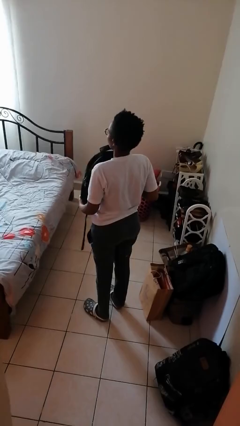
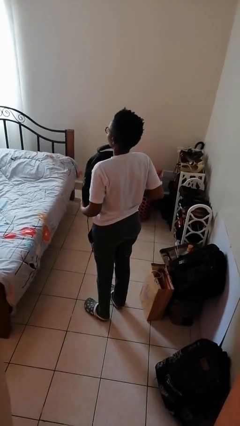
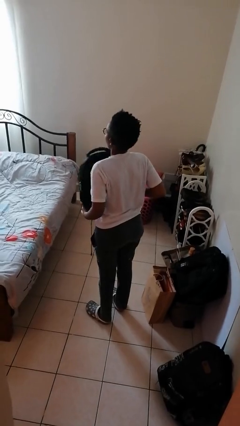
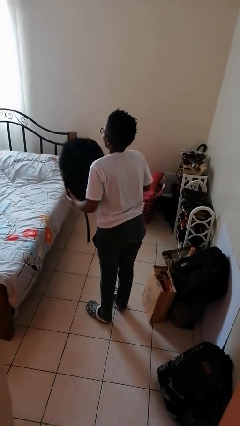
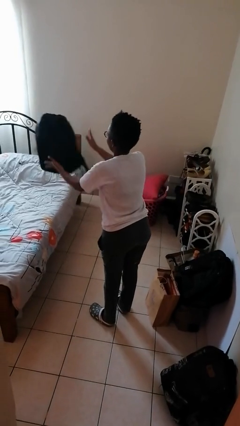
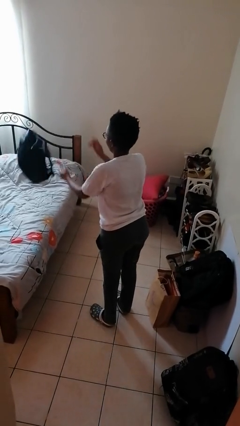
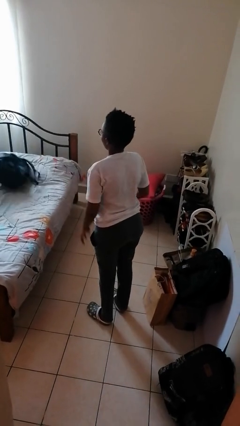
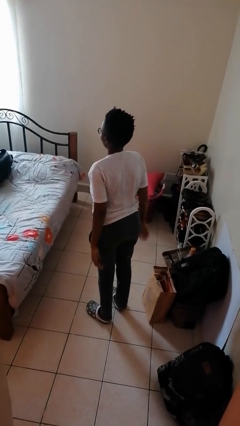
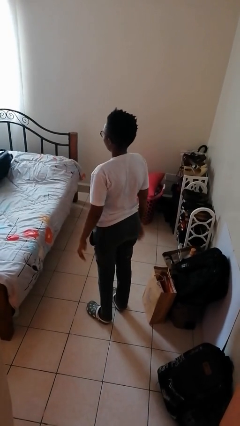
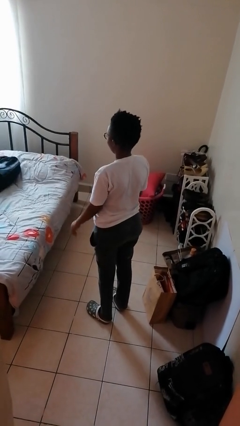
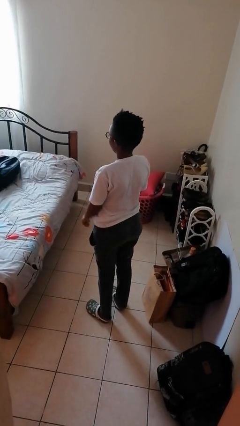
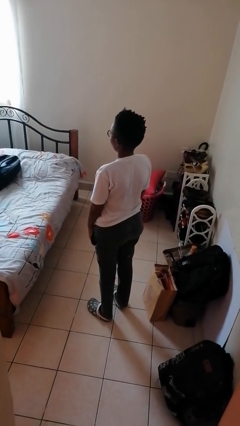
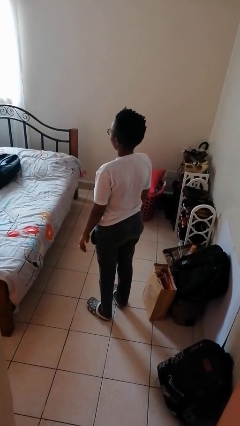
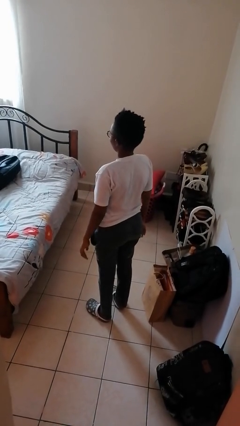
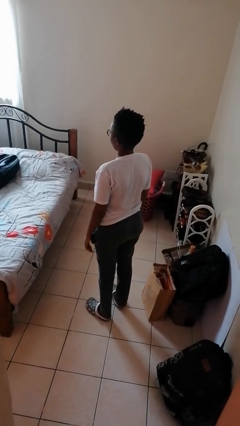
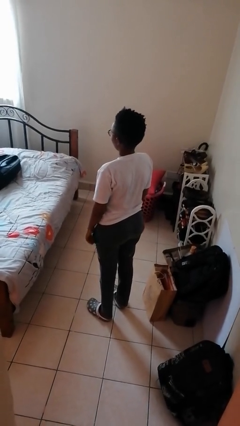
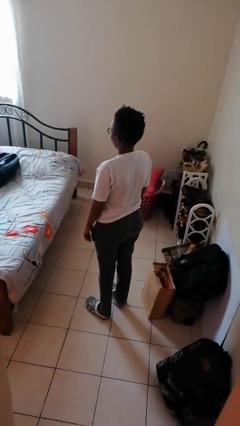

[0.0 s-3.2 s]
person throws object on bed

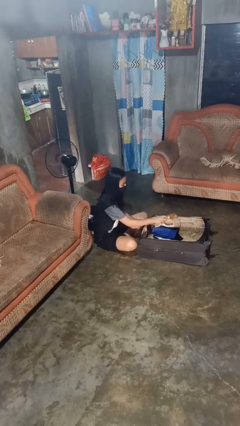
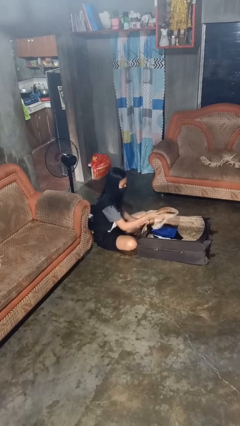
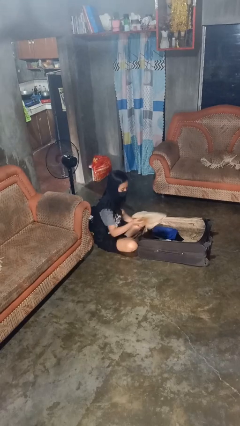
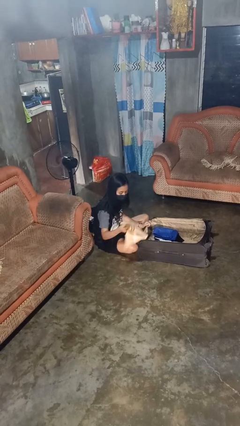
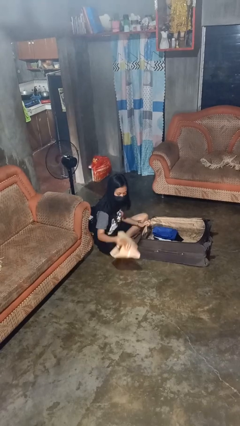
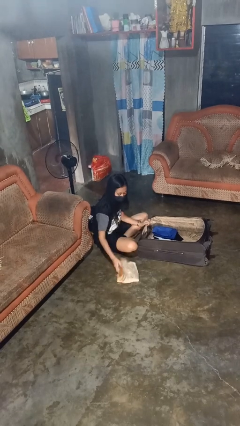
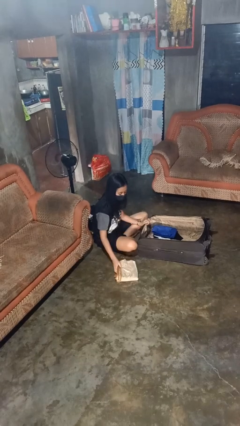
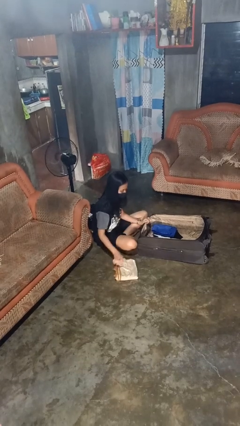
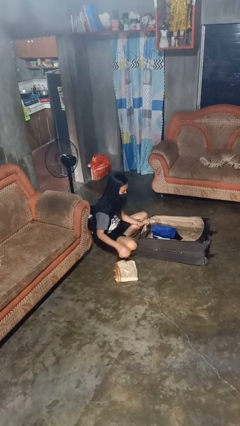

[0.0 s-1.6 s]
person unloads clothes from suitcase

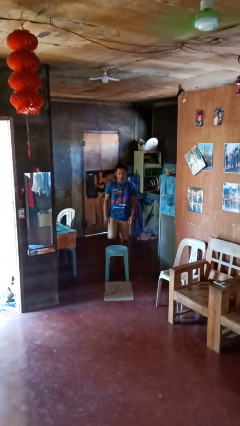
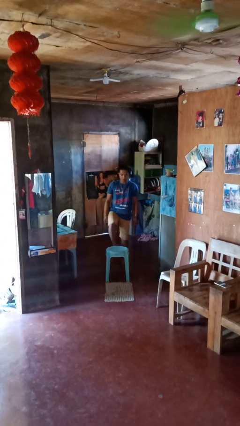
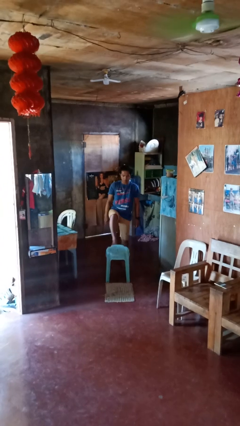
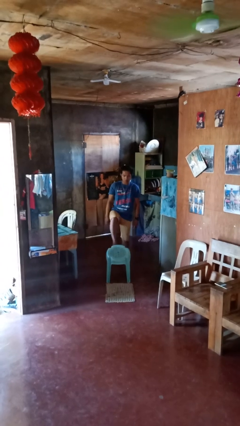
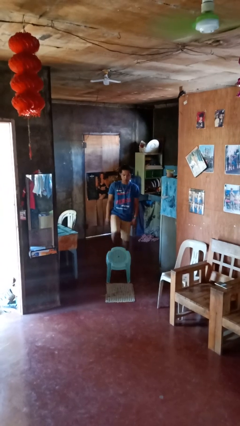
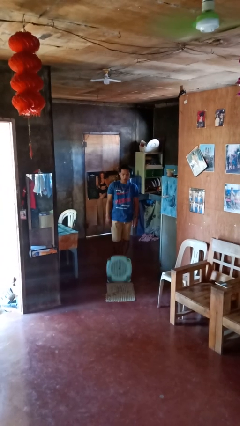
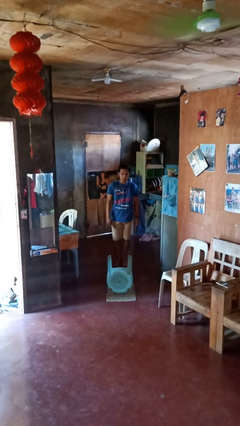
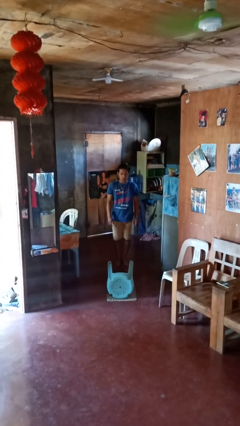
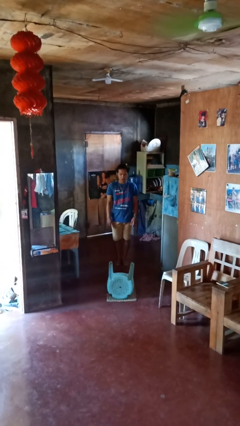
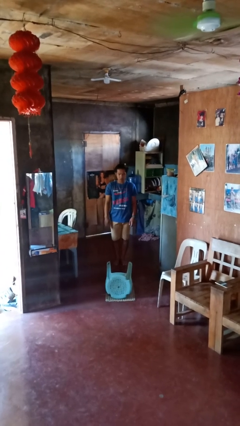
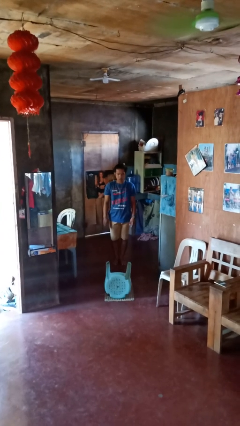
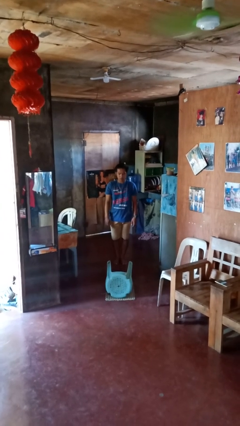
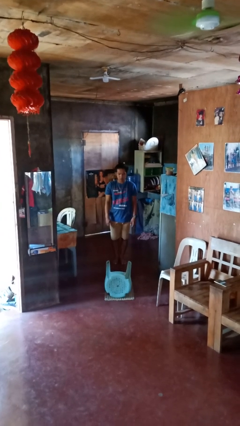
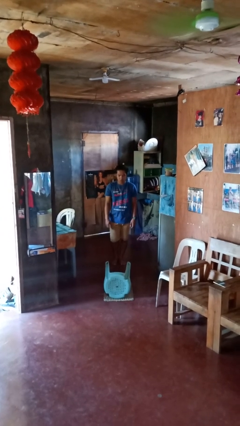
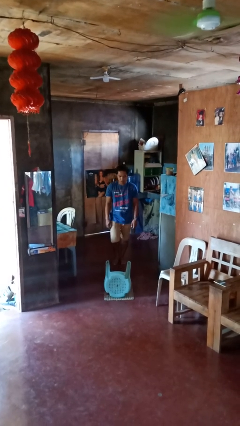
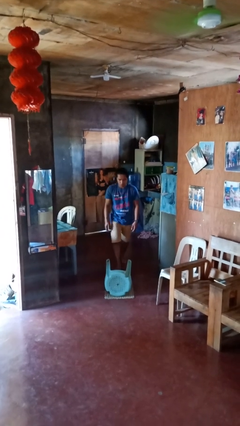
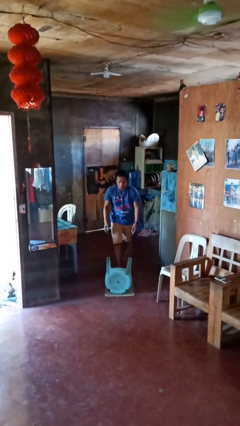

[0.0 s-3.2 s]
person knocks over furniture

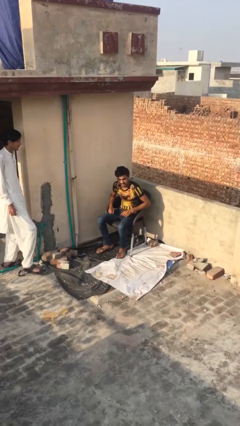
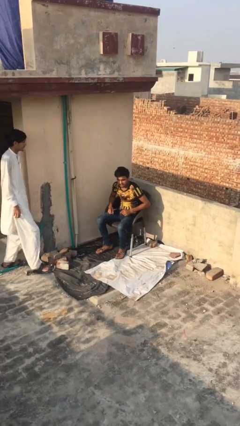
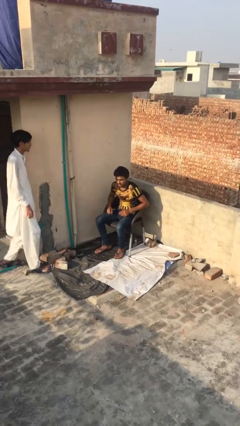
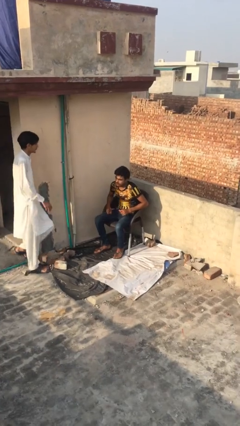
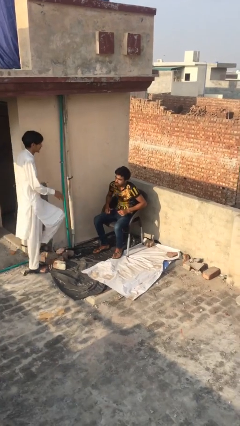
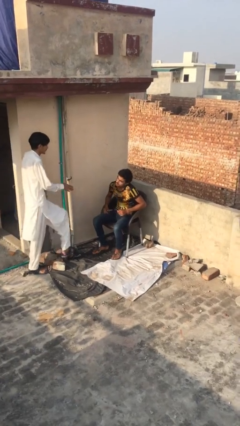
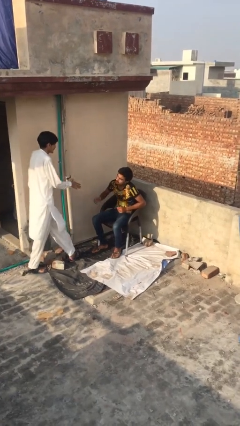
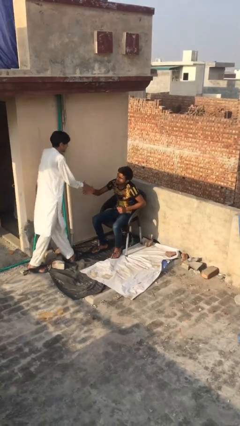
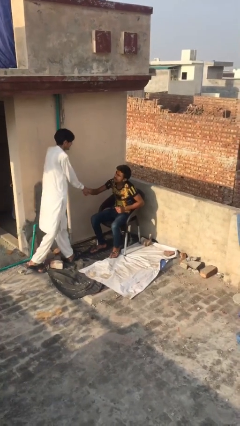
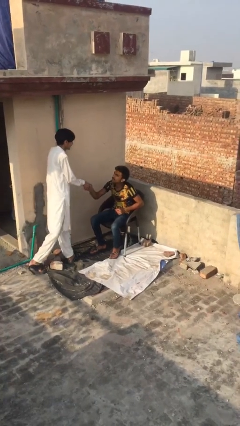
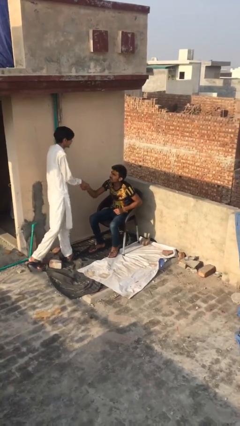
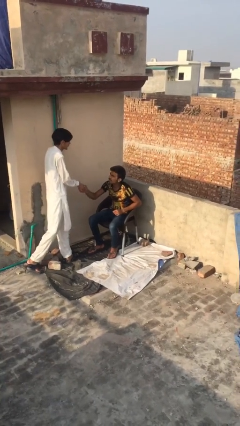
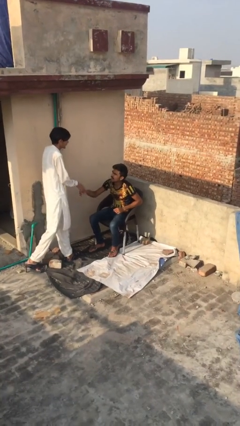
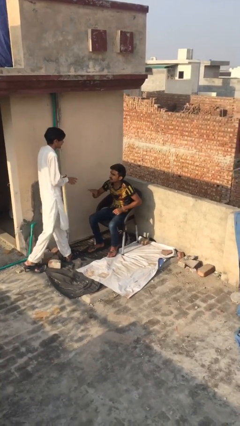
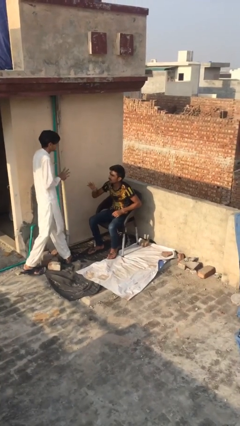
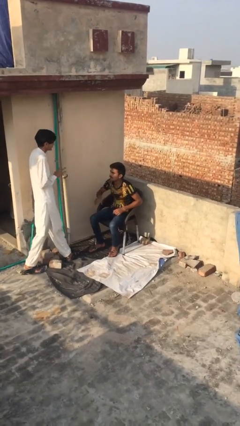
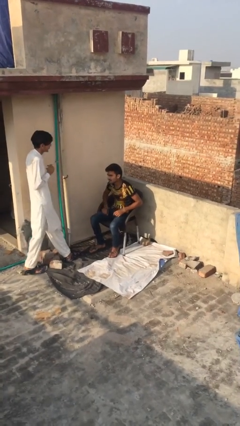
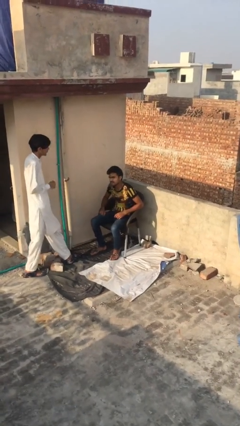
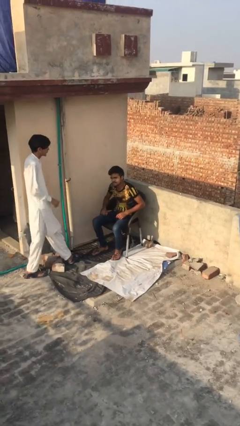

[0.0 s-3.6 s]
person shakes hand

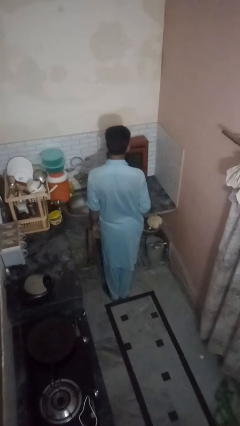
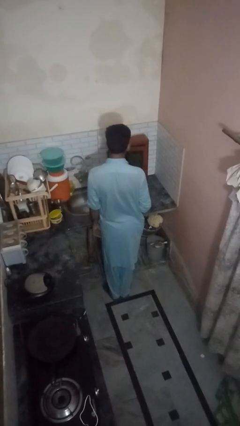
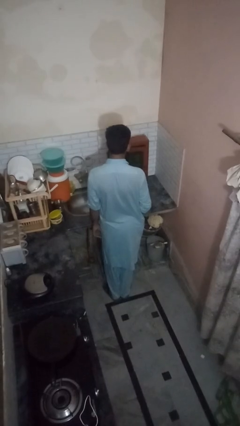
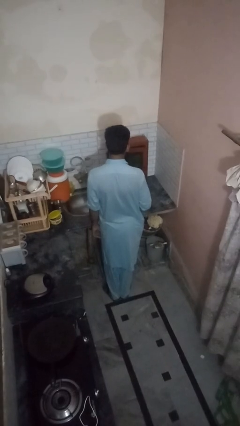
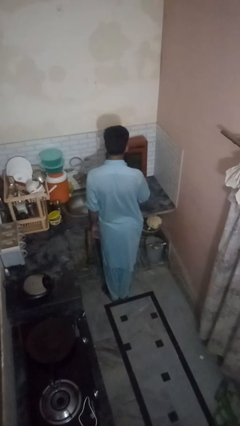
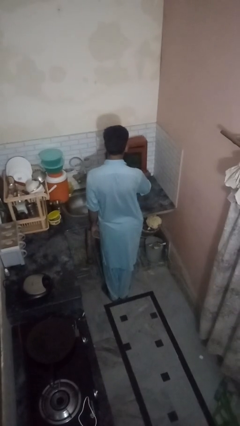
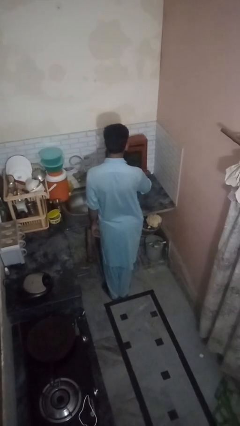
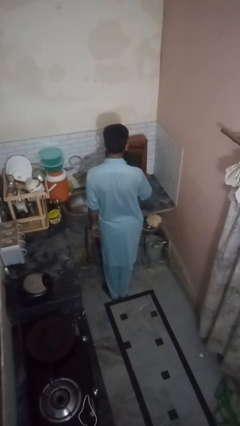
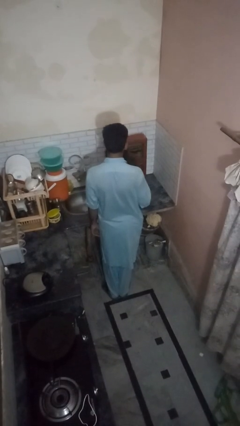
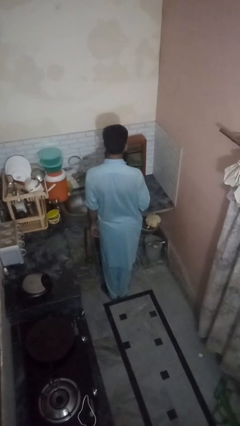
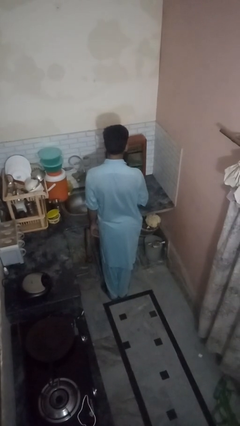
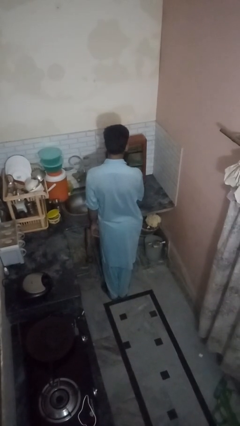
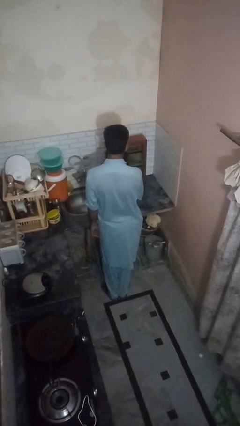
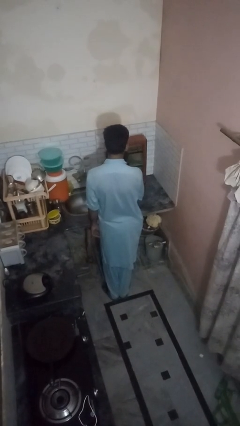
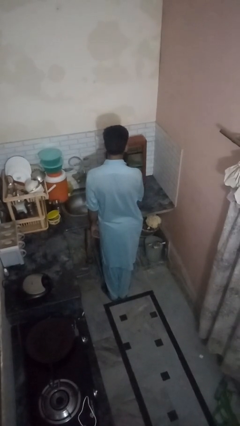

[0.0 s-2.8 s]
person opens kitchen drawer

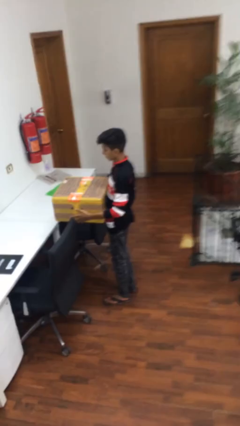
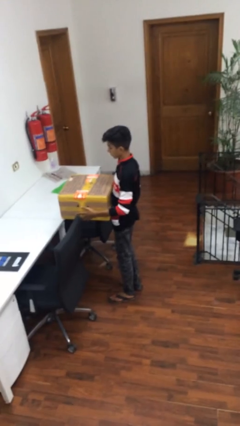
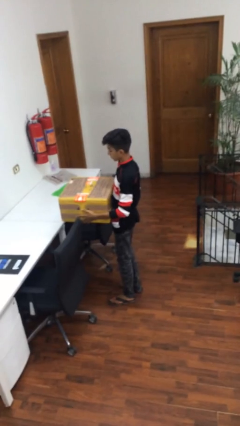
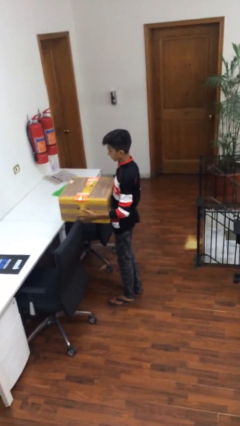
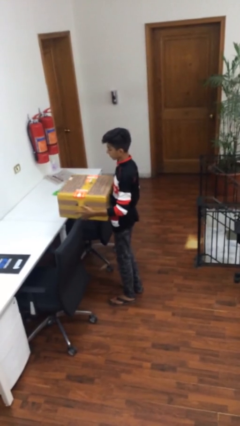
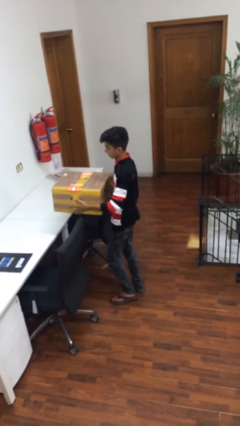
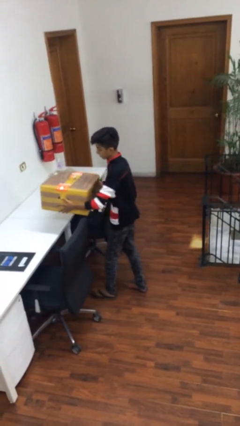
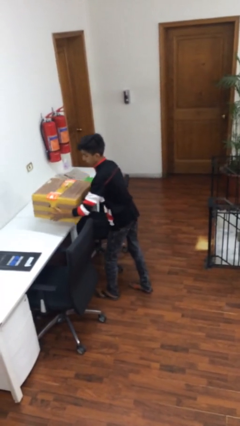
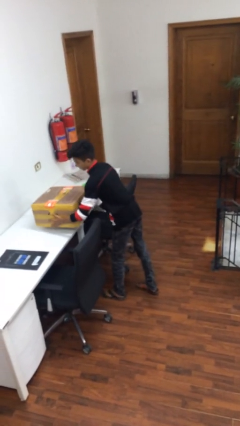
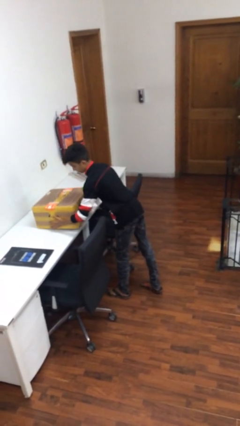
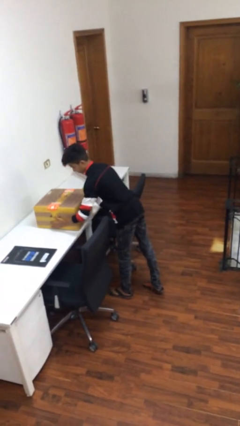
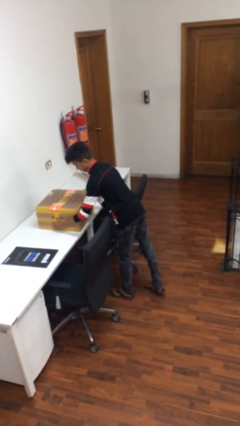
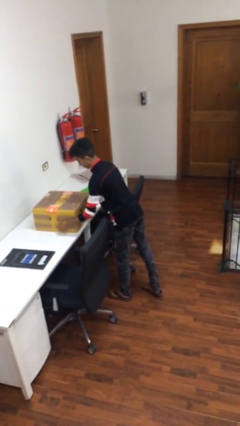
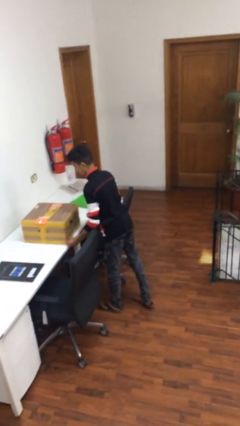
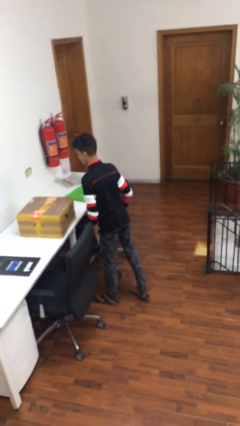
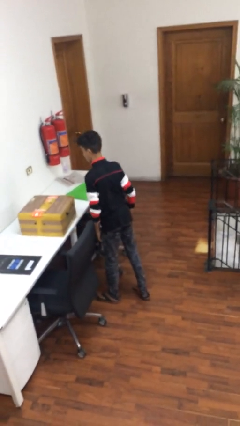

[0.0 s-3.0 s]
person puts down object on table
